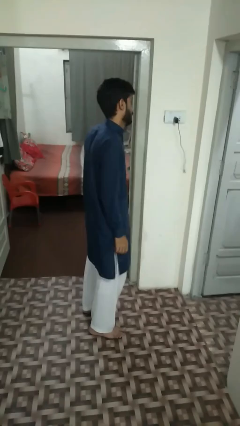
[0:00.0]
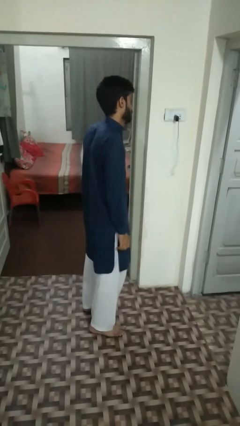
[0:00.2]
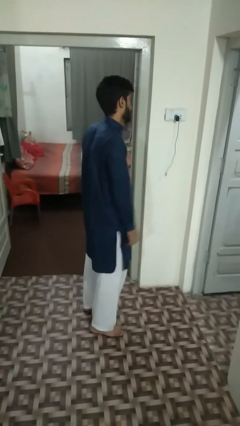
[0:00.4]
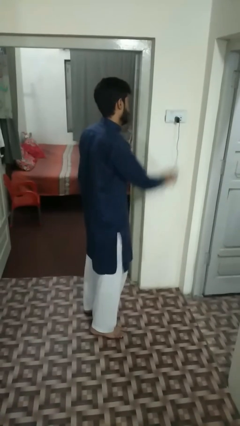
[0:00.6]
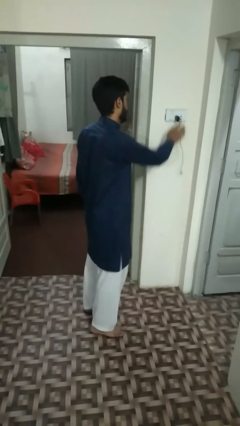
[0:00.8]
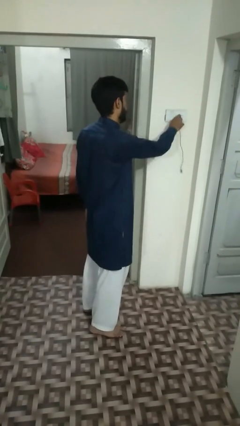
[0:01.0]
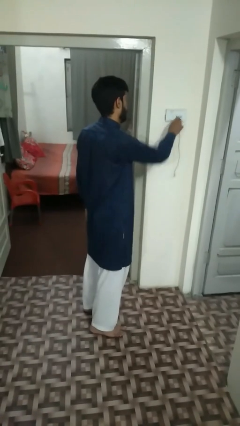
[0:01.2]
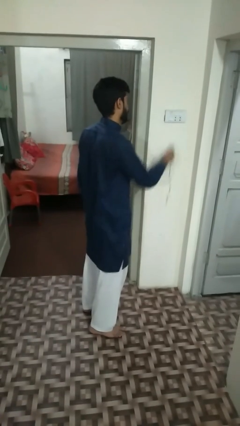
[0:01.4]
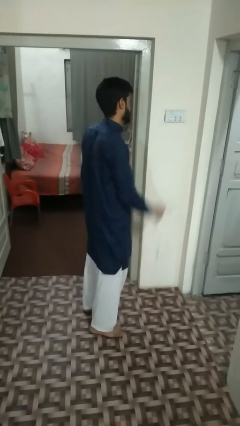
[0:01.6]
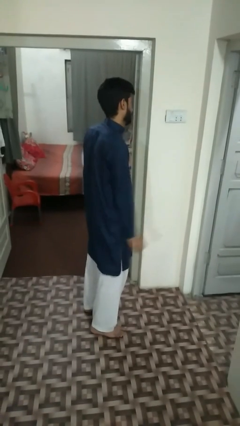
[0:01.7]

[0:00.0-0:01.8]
person unplugs from electrical socket

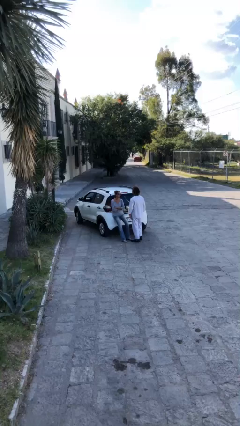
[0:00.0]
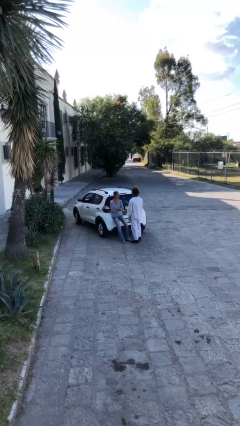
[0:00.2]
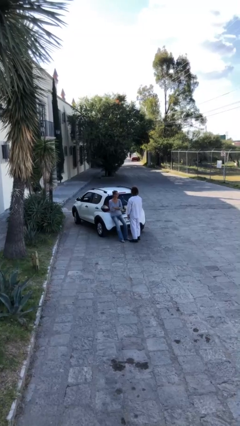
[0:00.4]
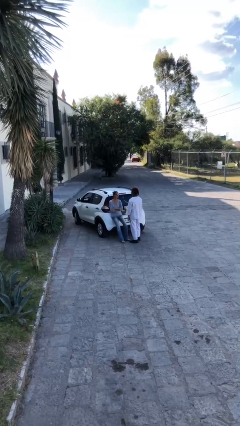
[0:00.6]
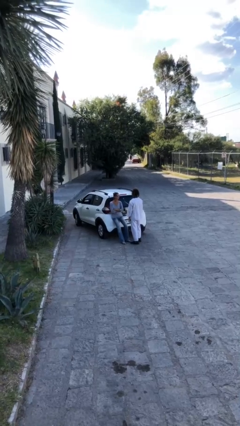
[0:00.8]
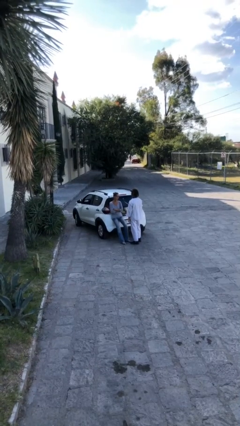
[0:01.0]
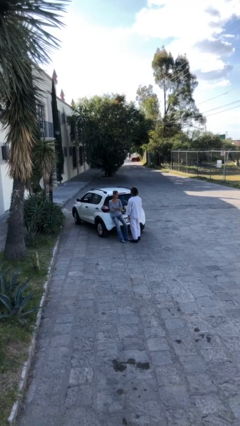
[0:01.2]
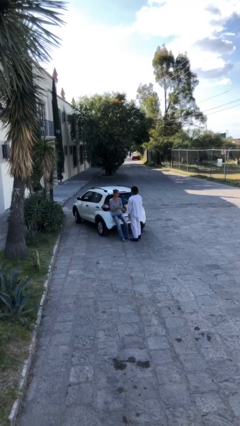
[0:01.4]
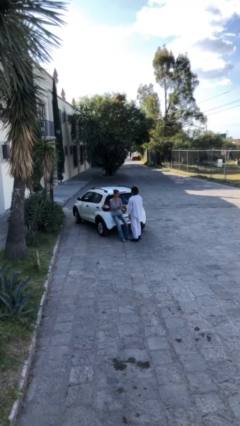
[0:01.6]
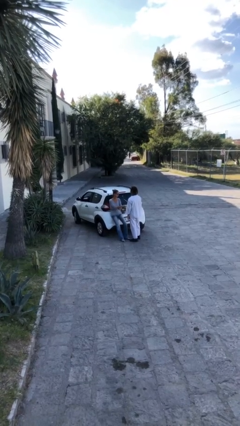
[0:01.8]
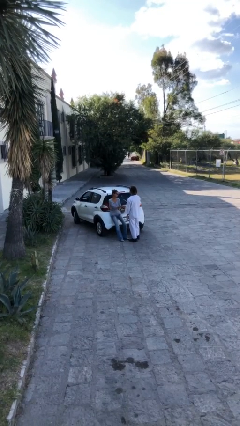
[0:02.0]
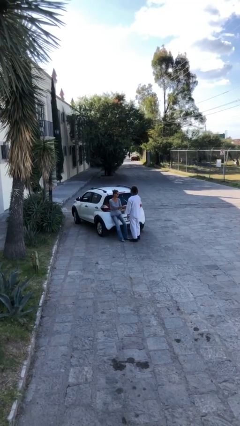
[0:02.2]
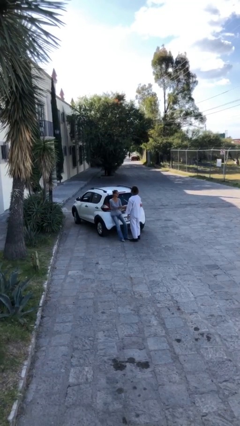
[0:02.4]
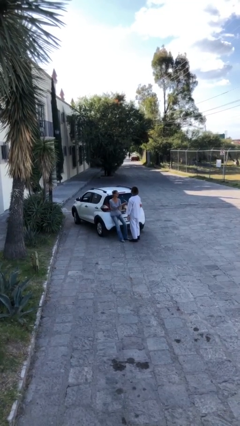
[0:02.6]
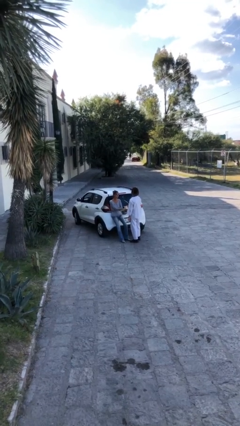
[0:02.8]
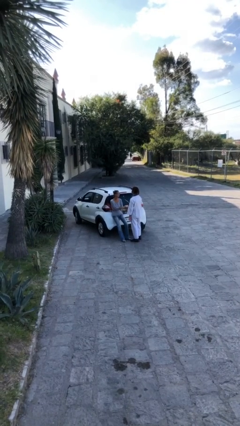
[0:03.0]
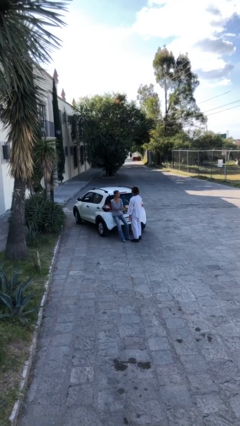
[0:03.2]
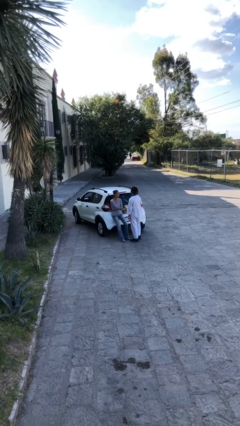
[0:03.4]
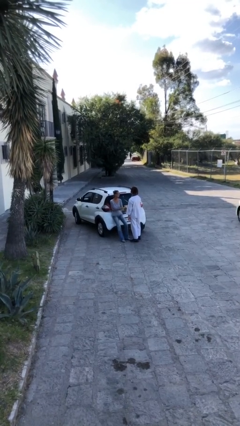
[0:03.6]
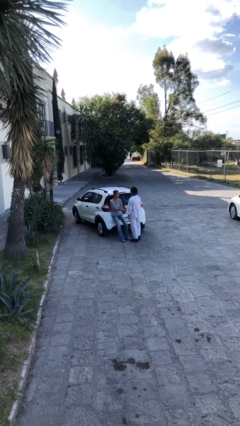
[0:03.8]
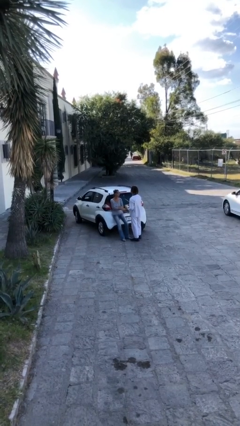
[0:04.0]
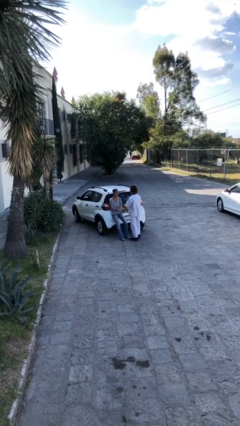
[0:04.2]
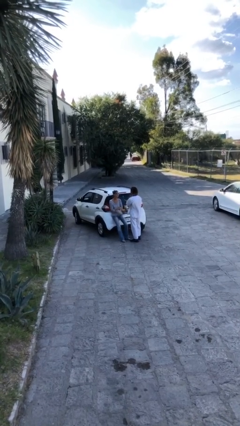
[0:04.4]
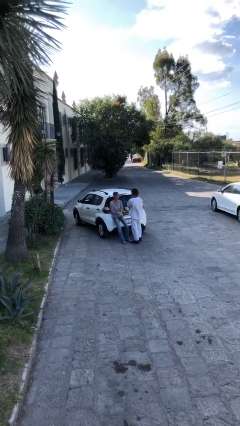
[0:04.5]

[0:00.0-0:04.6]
person shakes hand

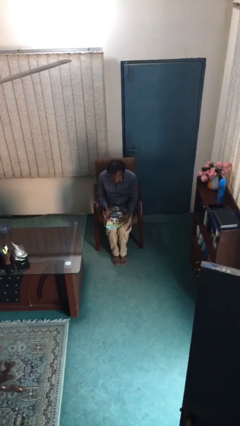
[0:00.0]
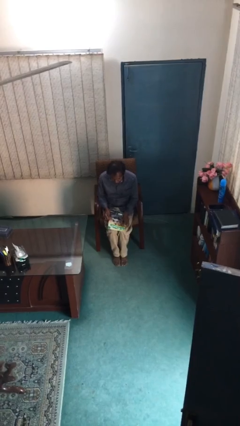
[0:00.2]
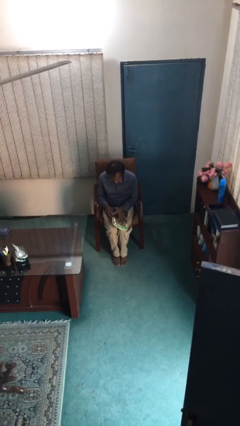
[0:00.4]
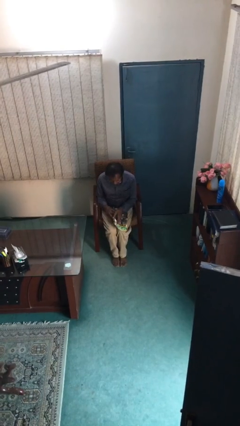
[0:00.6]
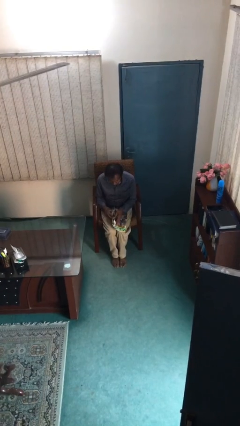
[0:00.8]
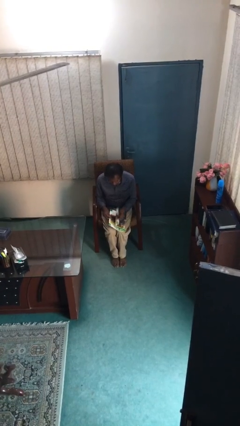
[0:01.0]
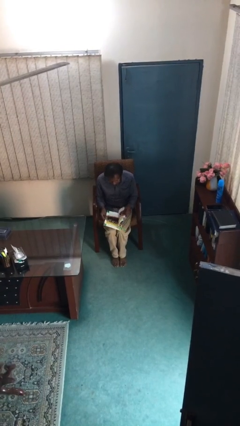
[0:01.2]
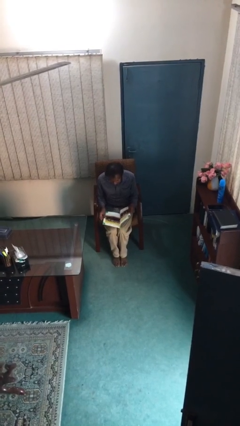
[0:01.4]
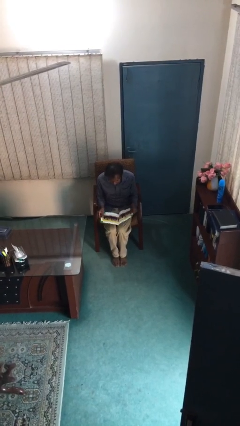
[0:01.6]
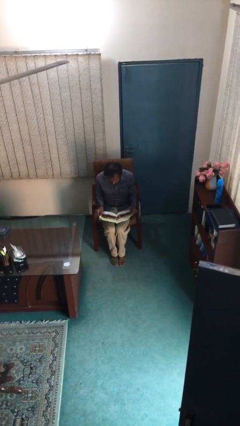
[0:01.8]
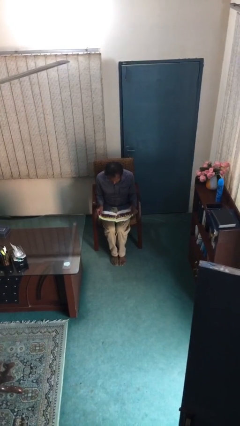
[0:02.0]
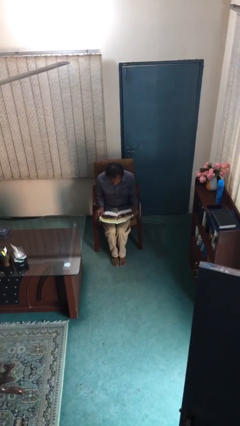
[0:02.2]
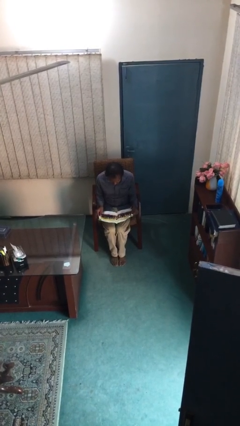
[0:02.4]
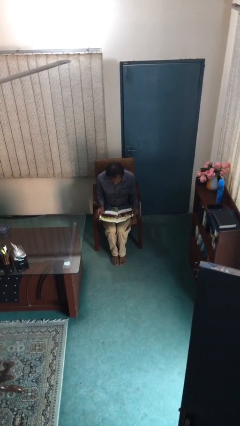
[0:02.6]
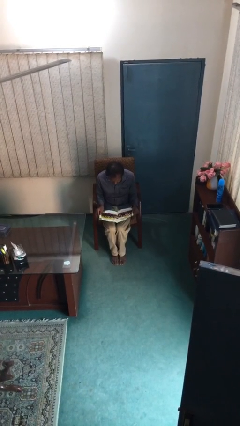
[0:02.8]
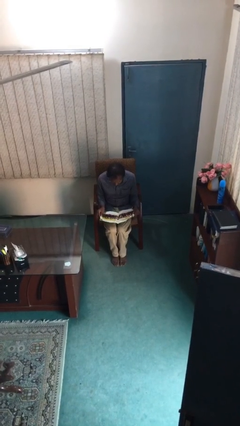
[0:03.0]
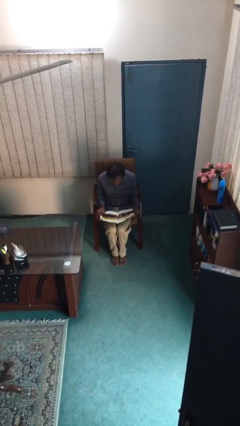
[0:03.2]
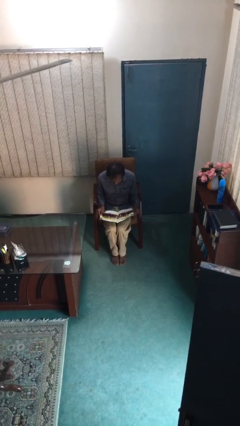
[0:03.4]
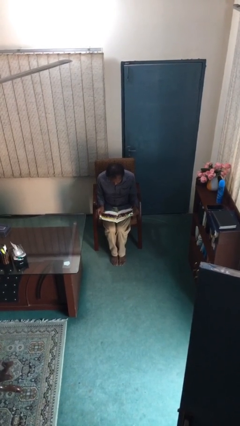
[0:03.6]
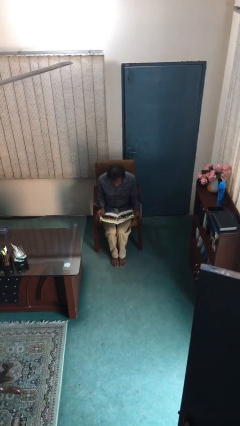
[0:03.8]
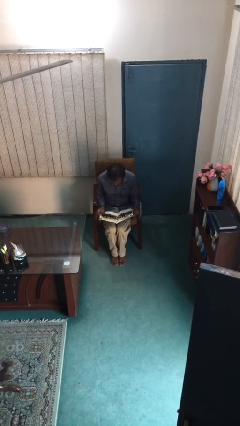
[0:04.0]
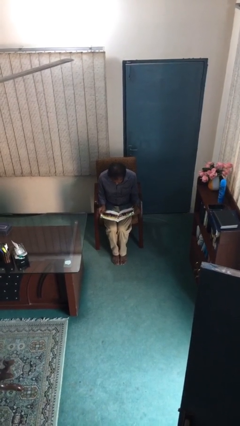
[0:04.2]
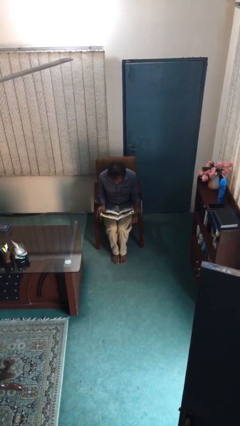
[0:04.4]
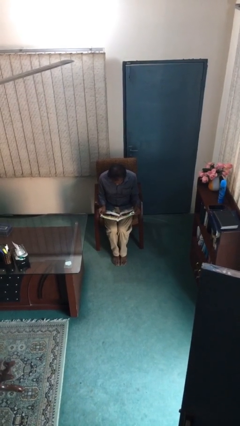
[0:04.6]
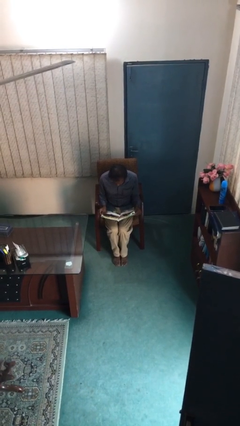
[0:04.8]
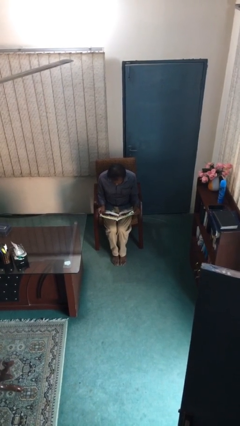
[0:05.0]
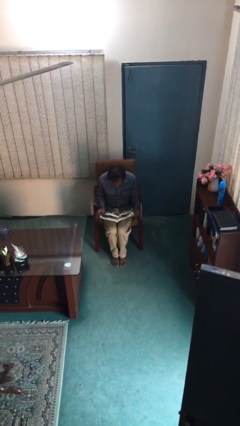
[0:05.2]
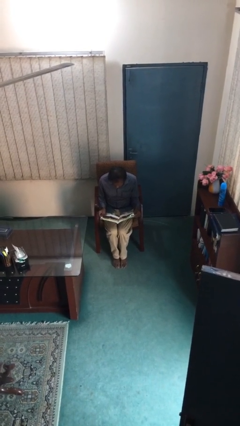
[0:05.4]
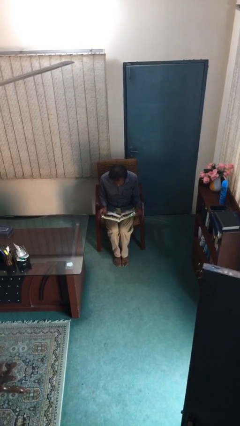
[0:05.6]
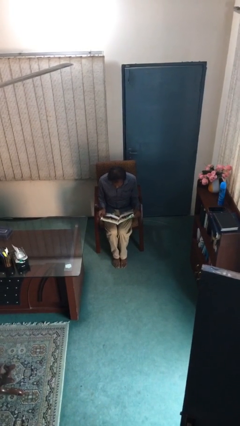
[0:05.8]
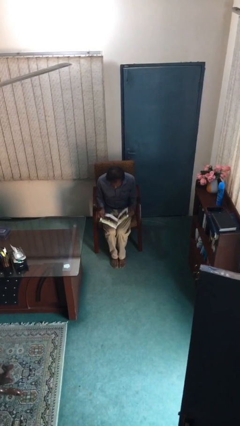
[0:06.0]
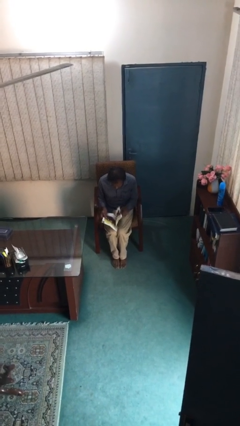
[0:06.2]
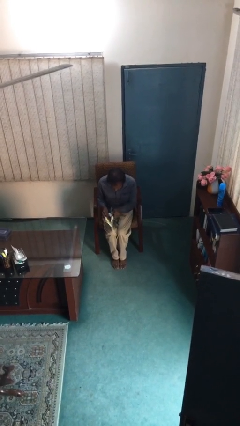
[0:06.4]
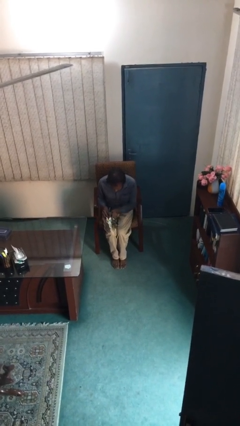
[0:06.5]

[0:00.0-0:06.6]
person reads document

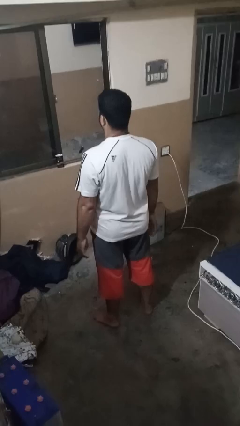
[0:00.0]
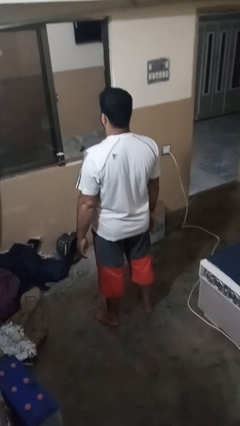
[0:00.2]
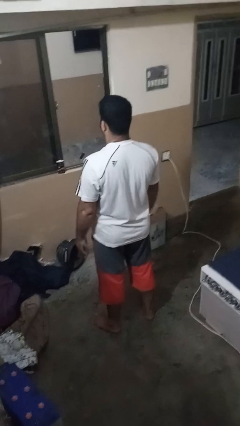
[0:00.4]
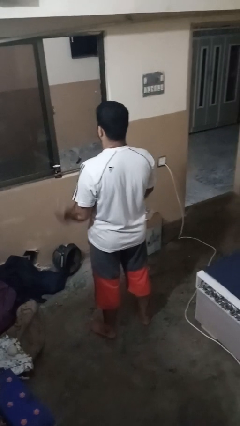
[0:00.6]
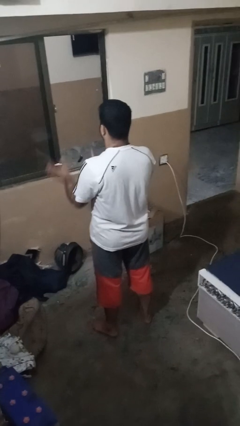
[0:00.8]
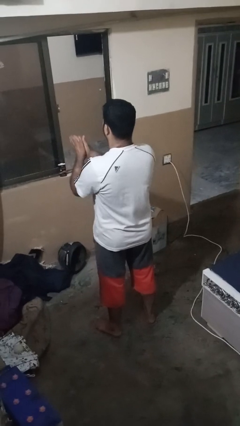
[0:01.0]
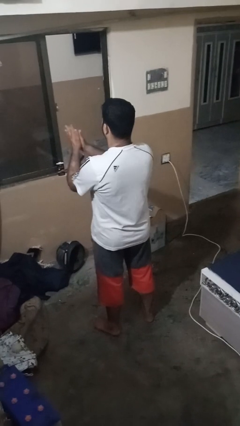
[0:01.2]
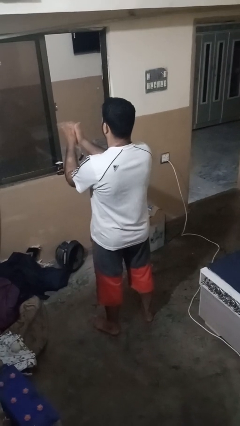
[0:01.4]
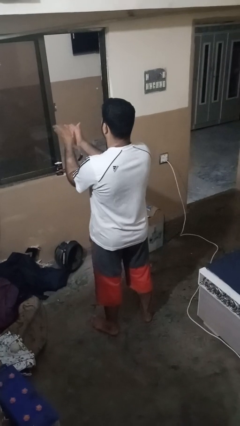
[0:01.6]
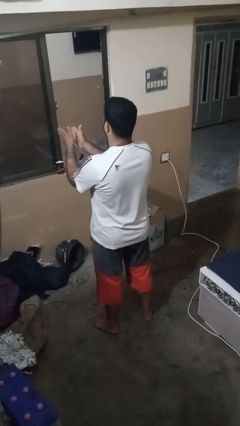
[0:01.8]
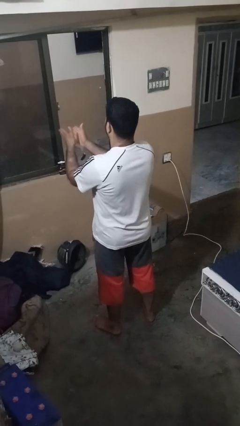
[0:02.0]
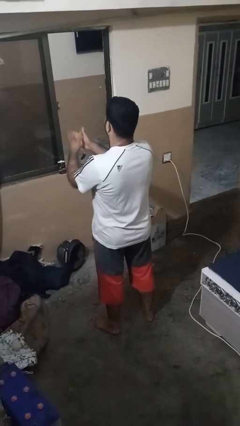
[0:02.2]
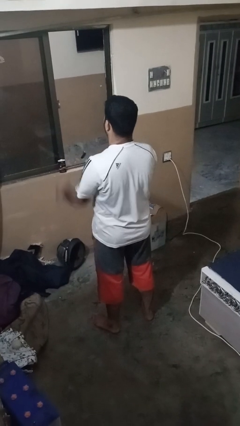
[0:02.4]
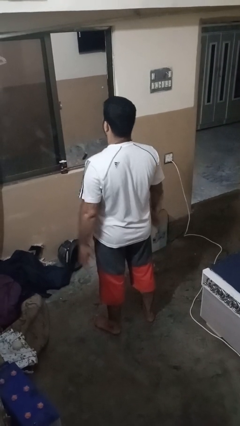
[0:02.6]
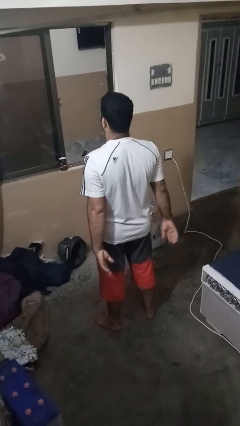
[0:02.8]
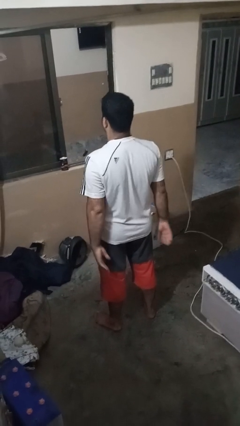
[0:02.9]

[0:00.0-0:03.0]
person claps hands

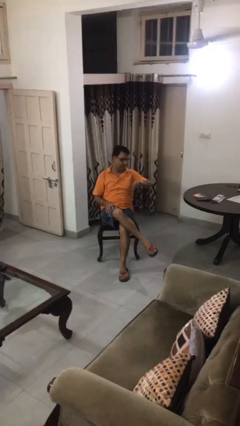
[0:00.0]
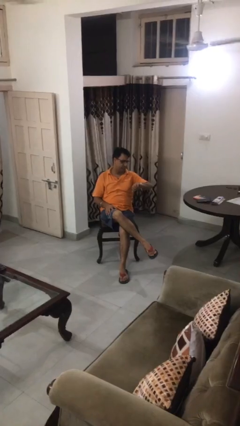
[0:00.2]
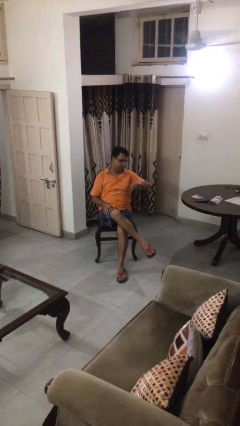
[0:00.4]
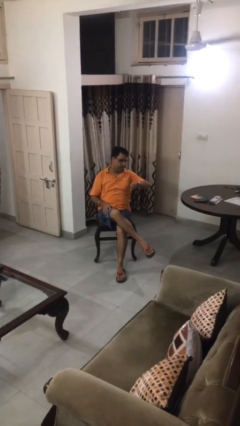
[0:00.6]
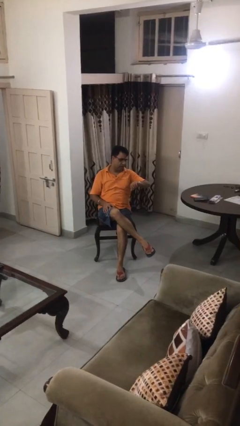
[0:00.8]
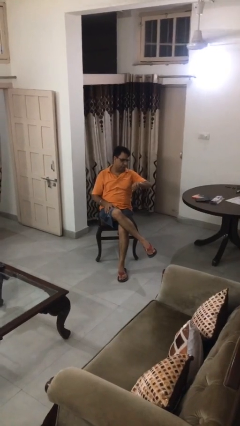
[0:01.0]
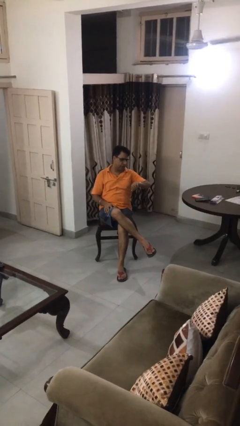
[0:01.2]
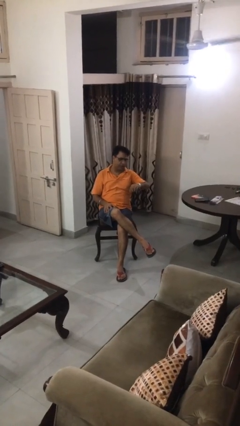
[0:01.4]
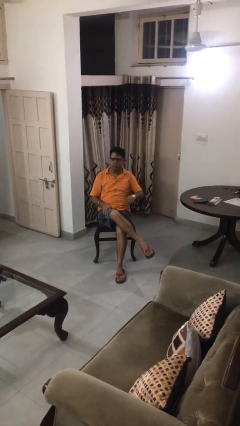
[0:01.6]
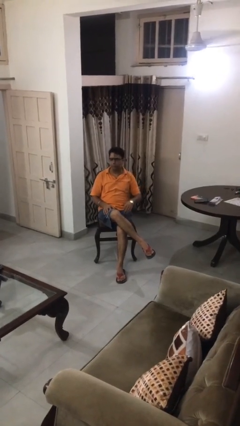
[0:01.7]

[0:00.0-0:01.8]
person looks at wristwatch

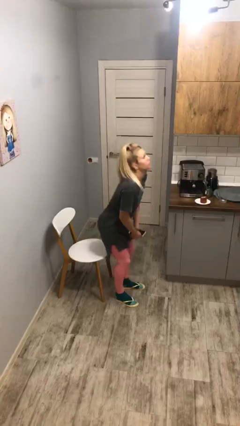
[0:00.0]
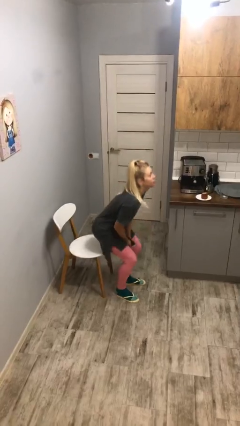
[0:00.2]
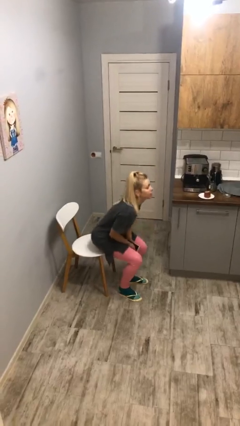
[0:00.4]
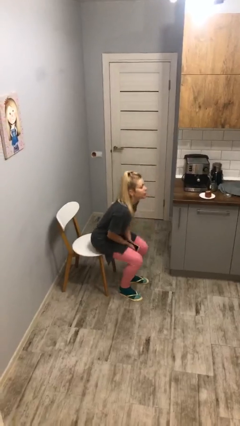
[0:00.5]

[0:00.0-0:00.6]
person sits down
